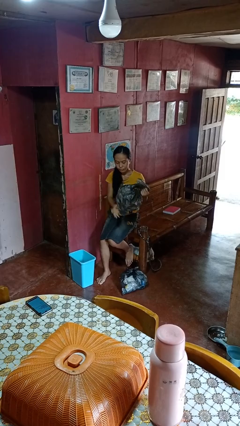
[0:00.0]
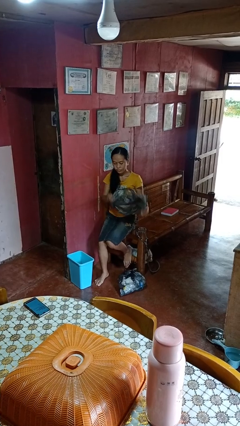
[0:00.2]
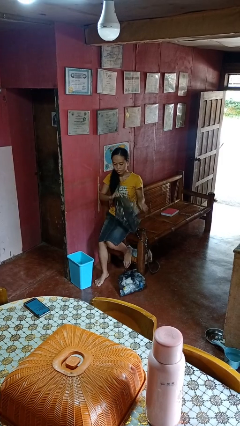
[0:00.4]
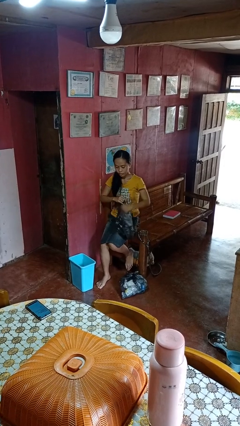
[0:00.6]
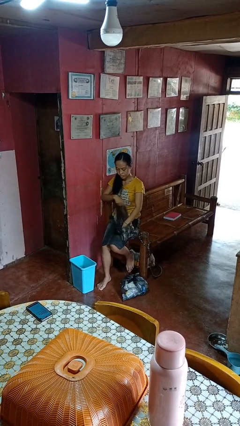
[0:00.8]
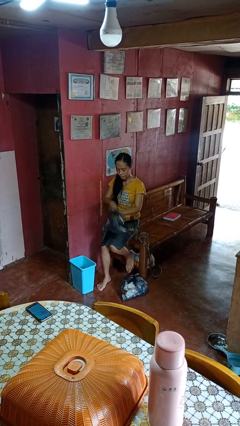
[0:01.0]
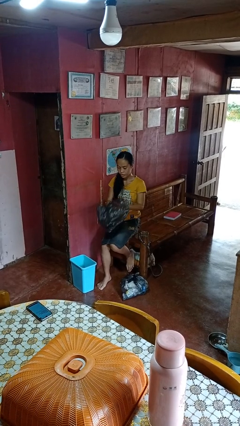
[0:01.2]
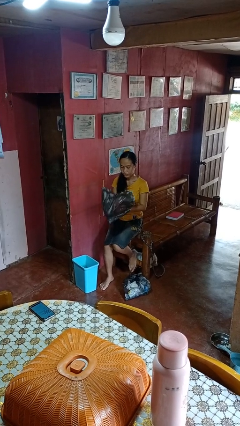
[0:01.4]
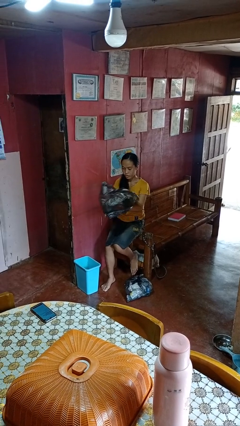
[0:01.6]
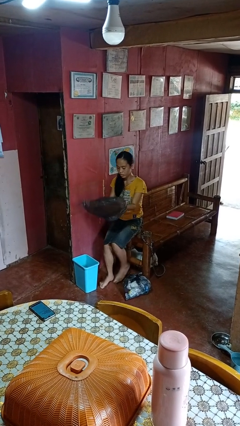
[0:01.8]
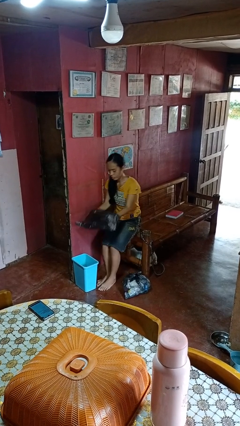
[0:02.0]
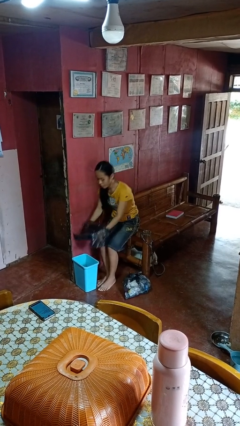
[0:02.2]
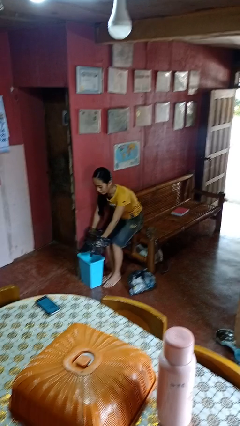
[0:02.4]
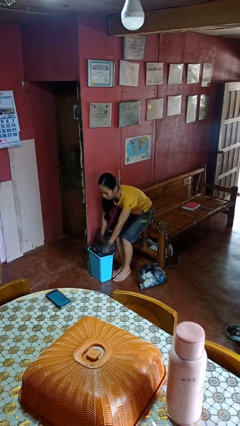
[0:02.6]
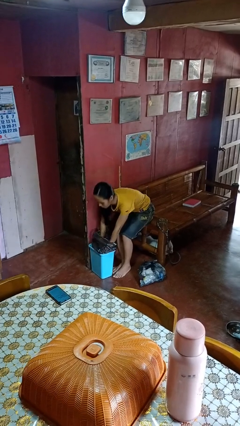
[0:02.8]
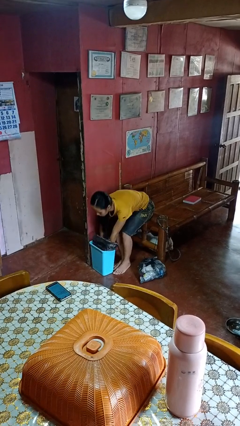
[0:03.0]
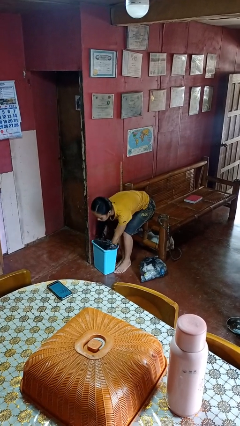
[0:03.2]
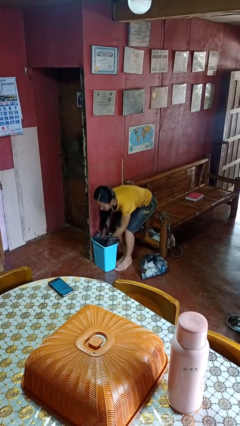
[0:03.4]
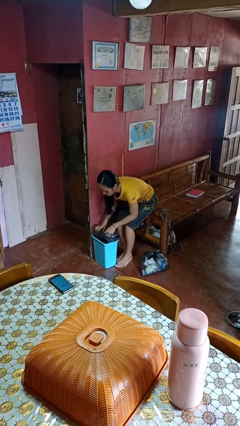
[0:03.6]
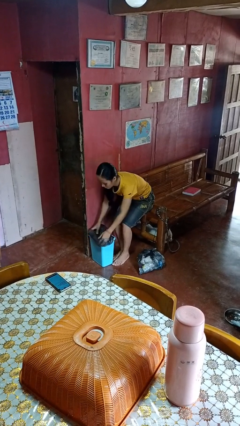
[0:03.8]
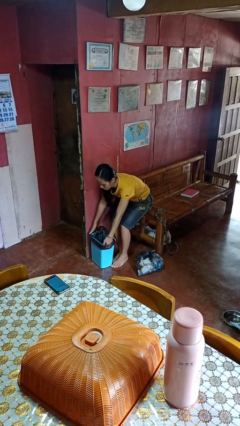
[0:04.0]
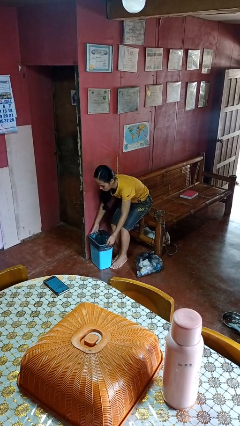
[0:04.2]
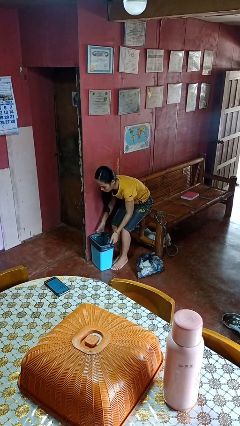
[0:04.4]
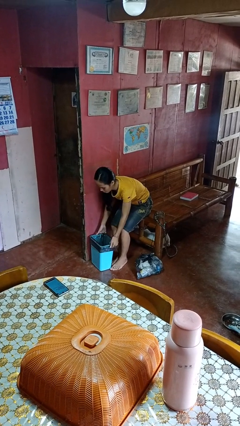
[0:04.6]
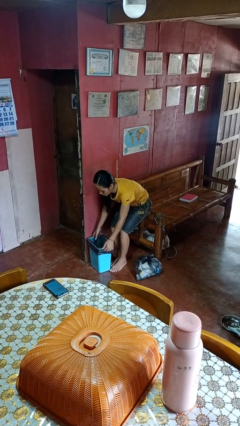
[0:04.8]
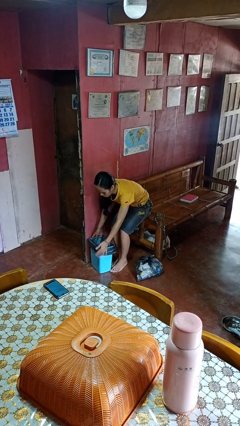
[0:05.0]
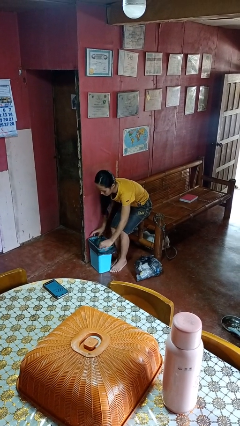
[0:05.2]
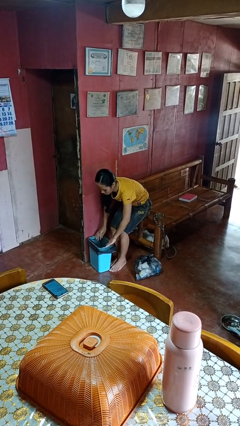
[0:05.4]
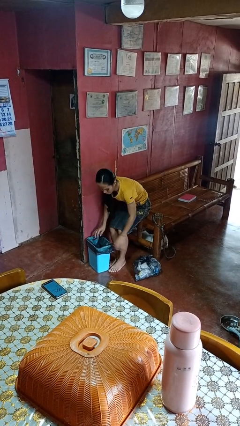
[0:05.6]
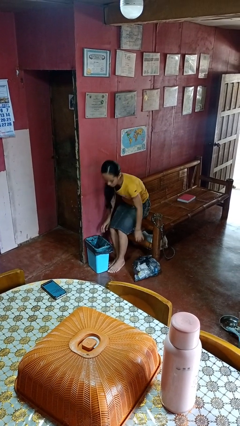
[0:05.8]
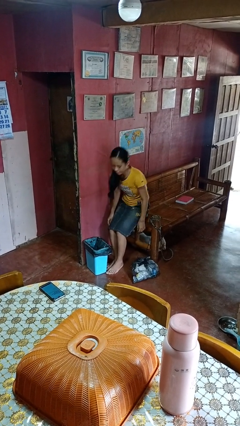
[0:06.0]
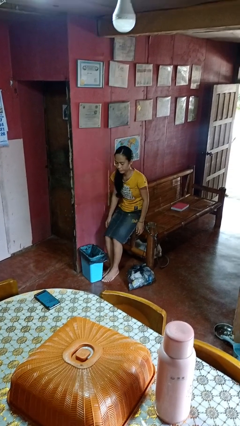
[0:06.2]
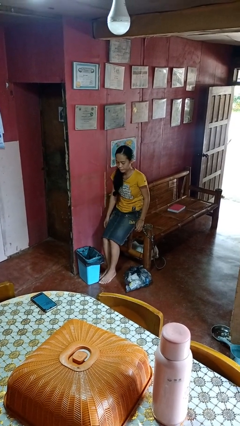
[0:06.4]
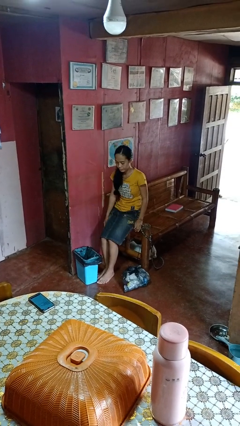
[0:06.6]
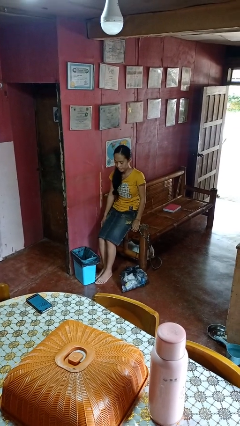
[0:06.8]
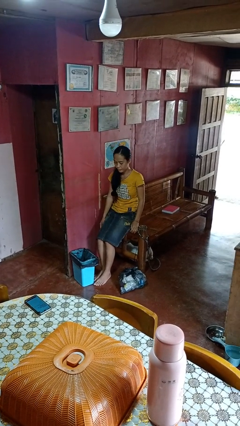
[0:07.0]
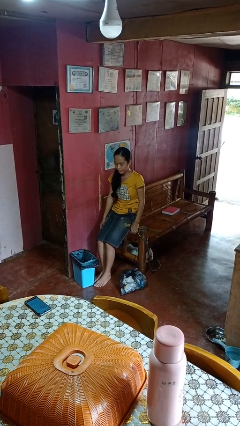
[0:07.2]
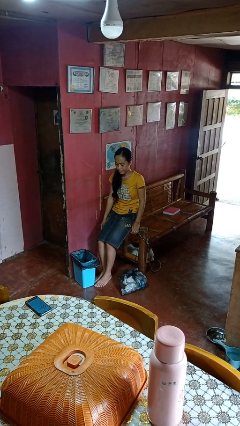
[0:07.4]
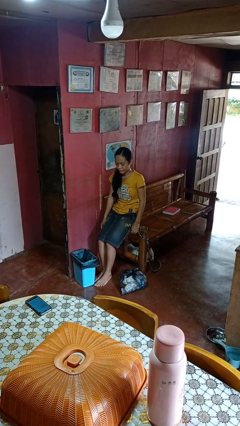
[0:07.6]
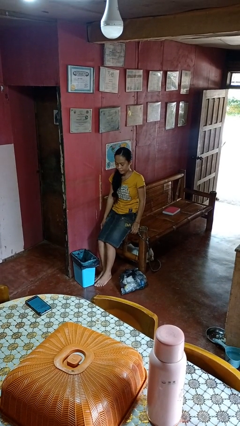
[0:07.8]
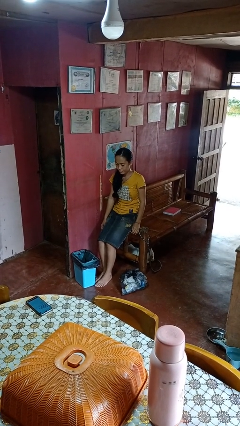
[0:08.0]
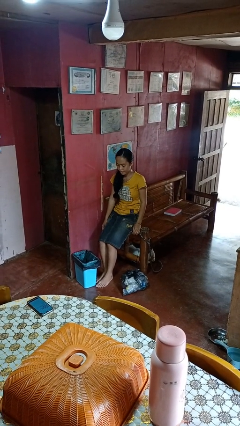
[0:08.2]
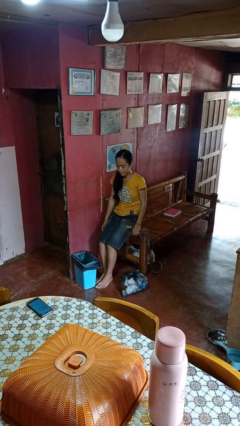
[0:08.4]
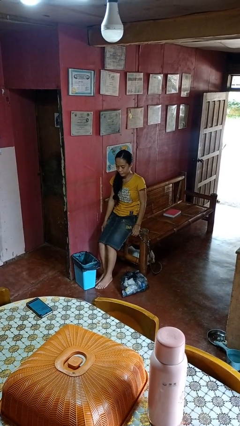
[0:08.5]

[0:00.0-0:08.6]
person inserts trashbag into trashcan

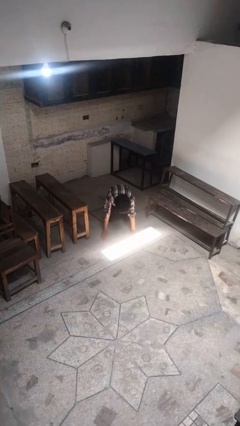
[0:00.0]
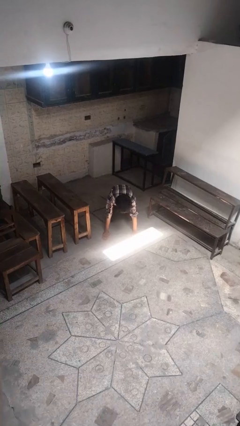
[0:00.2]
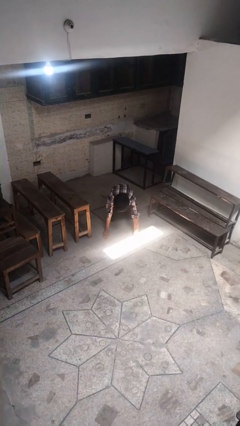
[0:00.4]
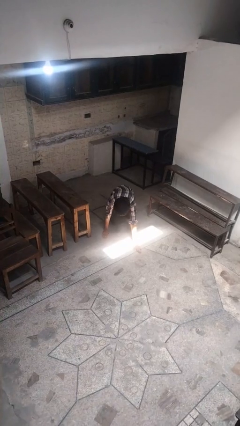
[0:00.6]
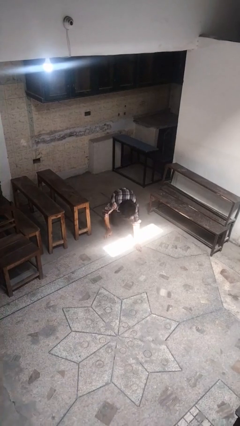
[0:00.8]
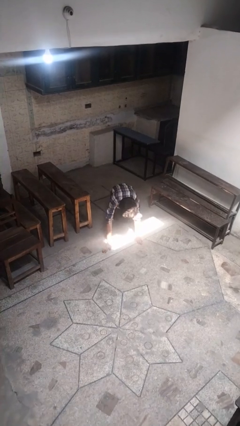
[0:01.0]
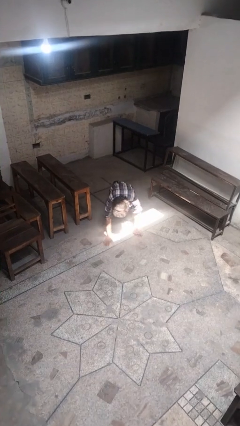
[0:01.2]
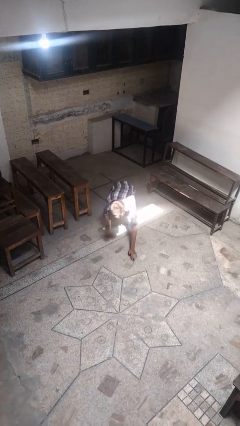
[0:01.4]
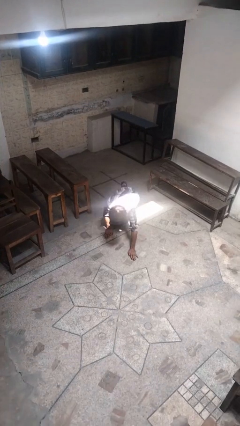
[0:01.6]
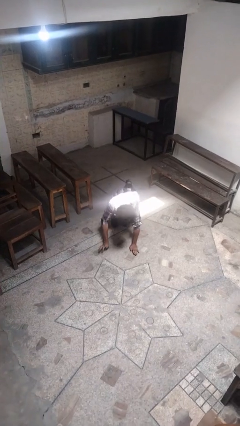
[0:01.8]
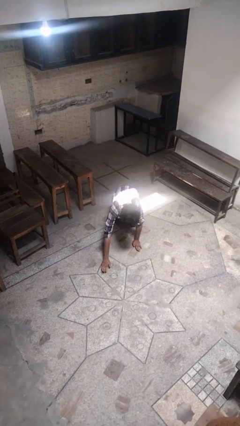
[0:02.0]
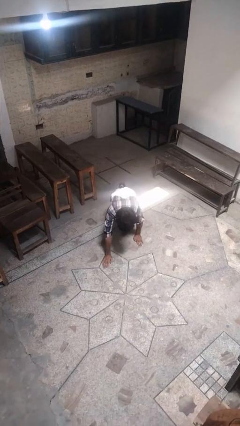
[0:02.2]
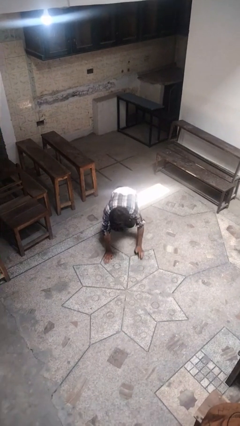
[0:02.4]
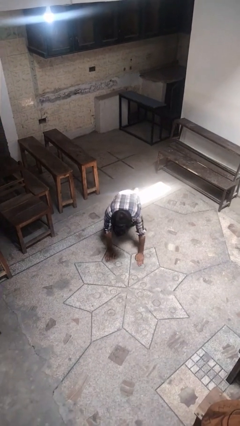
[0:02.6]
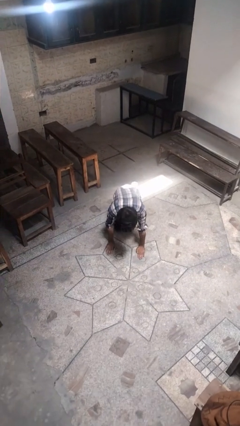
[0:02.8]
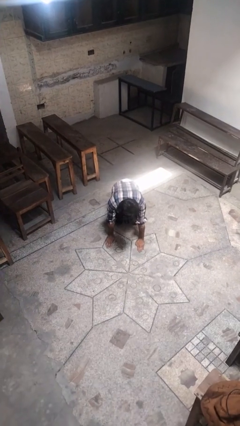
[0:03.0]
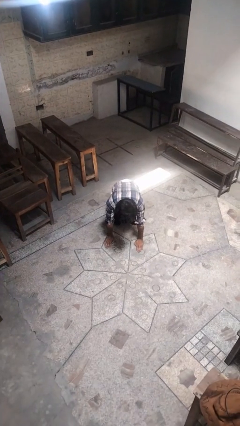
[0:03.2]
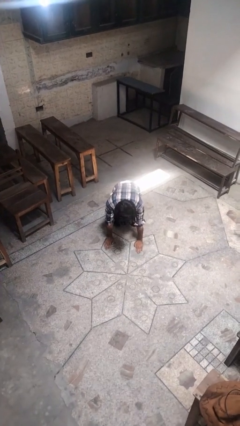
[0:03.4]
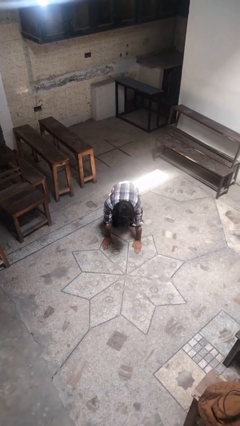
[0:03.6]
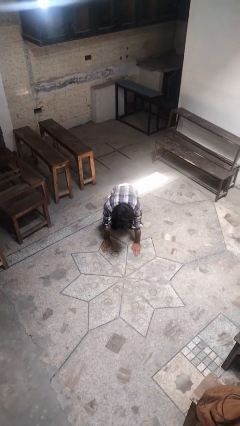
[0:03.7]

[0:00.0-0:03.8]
person crawls

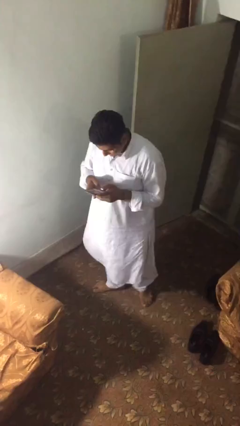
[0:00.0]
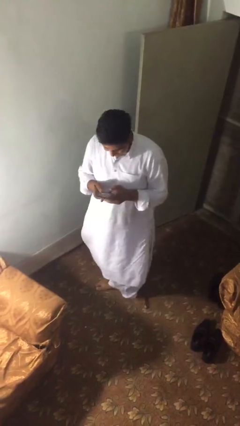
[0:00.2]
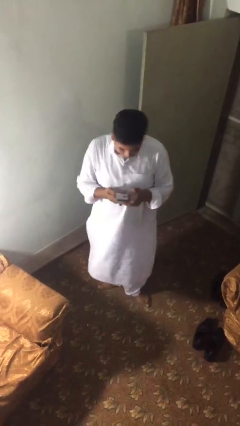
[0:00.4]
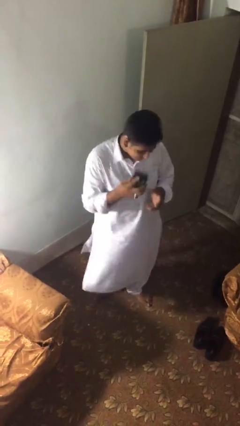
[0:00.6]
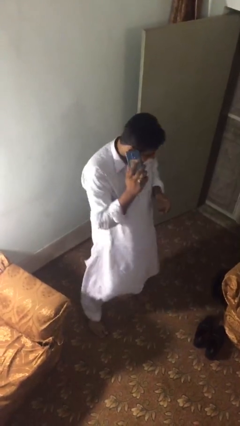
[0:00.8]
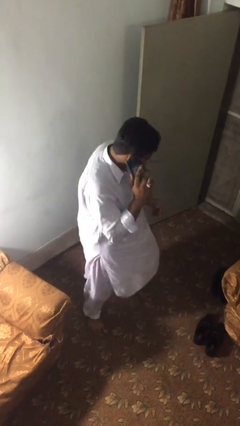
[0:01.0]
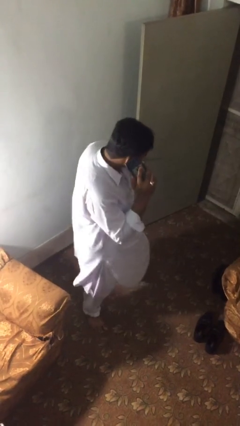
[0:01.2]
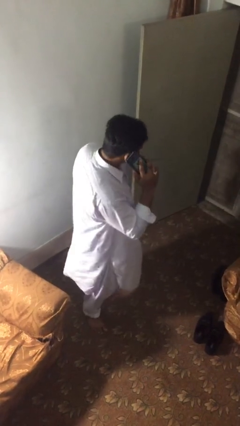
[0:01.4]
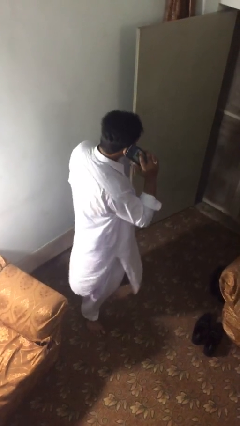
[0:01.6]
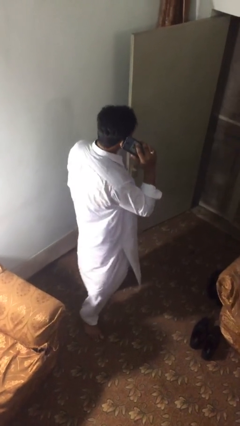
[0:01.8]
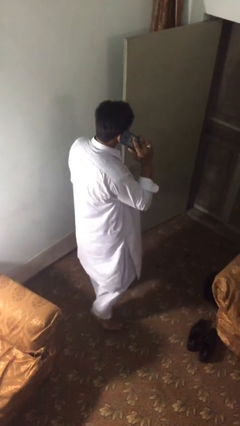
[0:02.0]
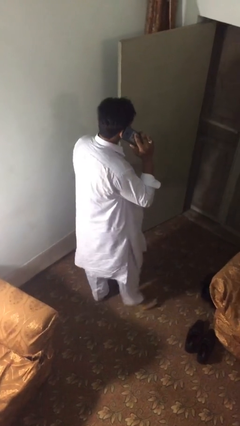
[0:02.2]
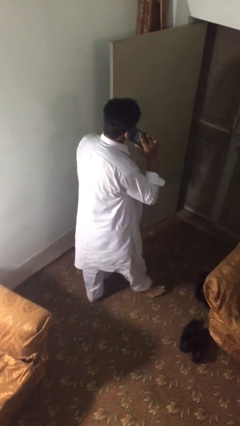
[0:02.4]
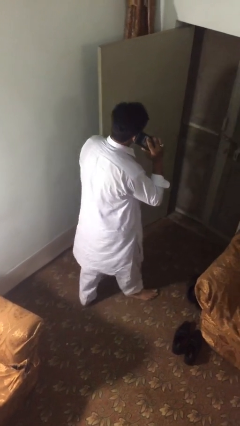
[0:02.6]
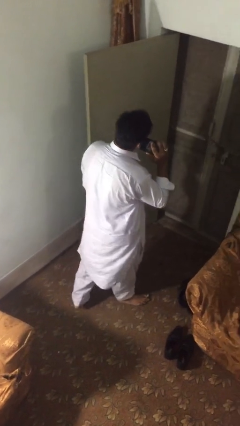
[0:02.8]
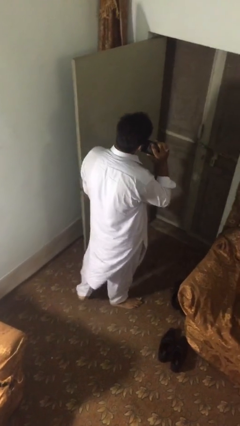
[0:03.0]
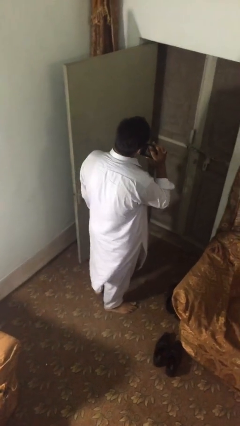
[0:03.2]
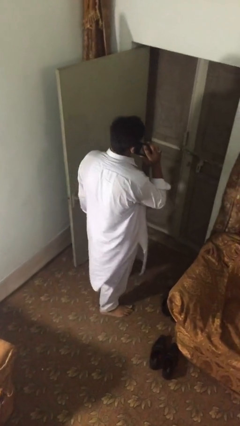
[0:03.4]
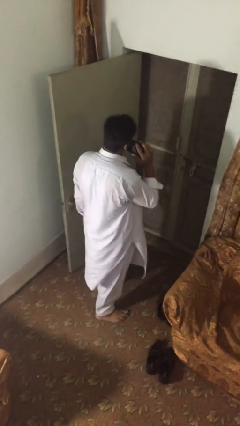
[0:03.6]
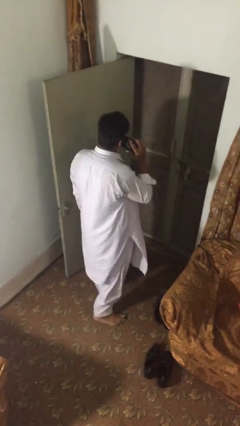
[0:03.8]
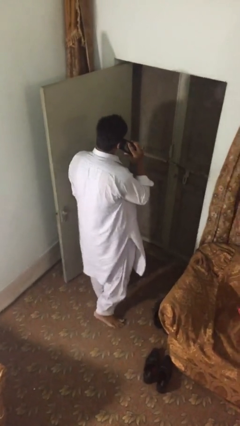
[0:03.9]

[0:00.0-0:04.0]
person talks on phone

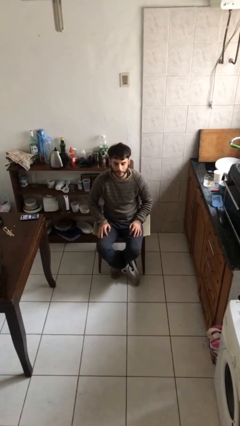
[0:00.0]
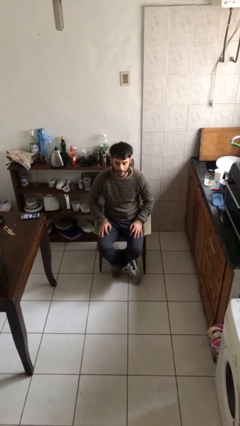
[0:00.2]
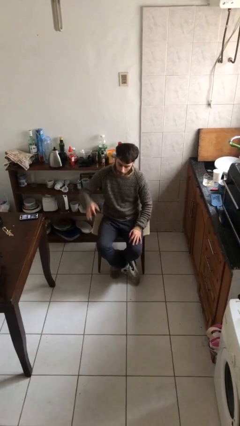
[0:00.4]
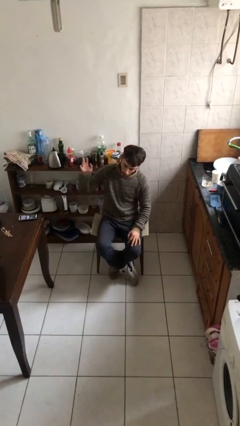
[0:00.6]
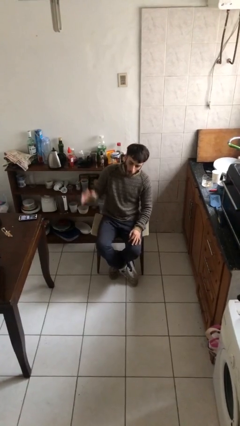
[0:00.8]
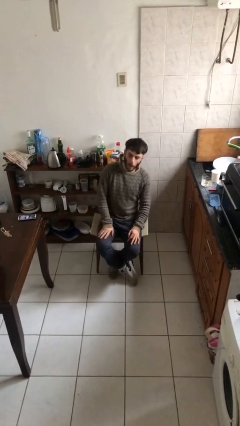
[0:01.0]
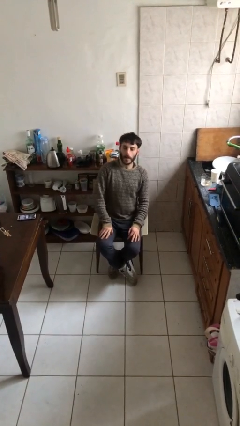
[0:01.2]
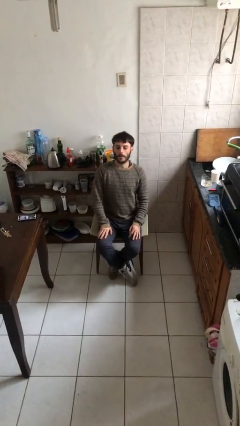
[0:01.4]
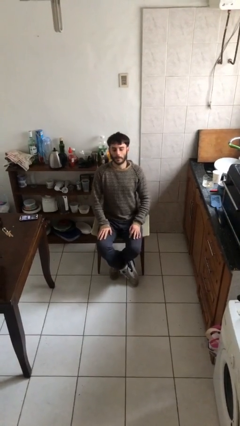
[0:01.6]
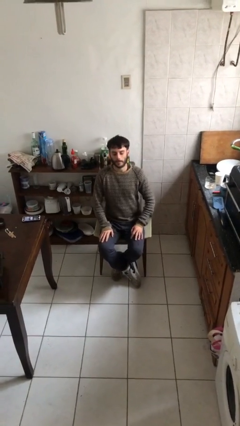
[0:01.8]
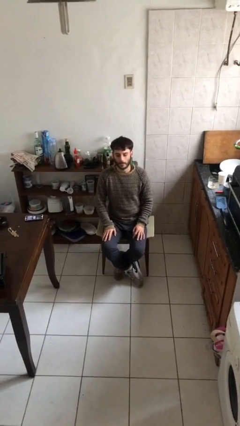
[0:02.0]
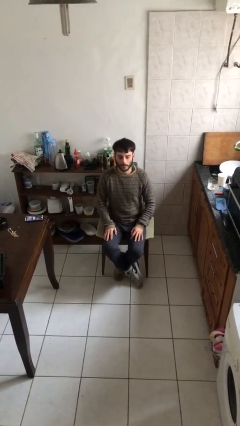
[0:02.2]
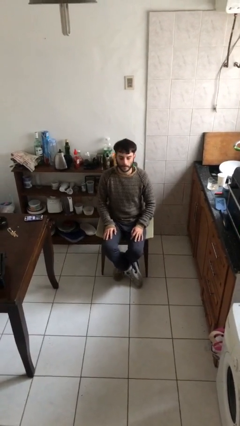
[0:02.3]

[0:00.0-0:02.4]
person slaps hands on thighs
